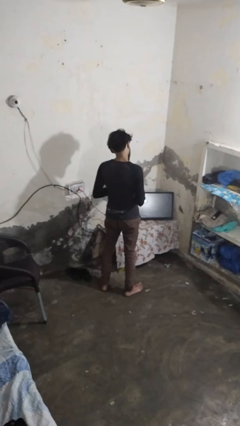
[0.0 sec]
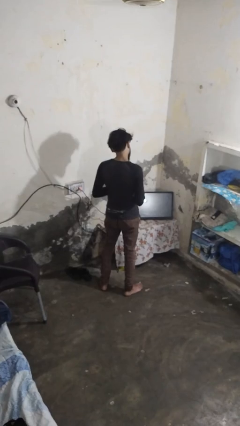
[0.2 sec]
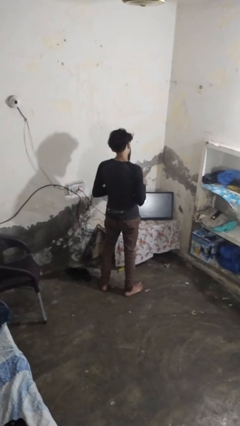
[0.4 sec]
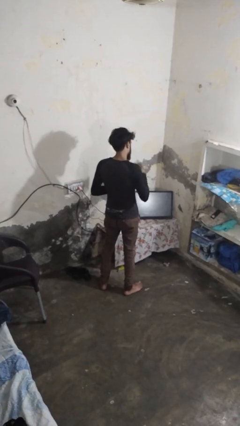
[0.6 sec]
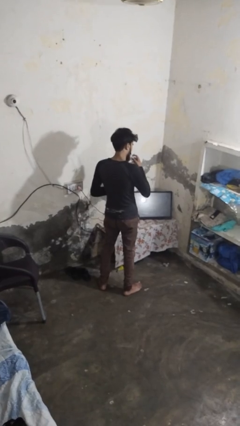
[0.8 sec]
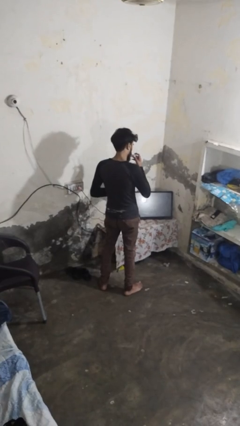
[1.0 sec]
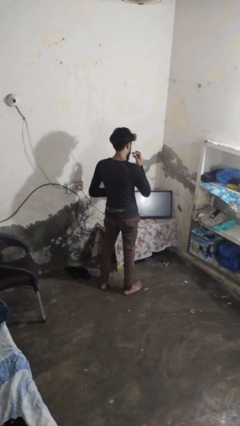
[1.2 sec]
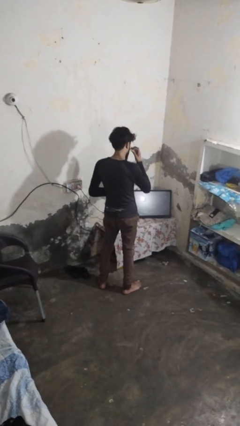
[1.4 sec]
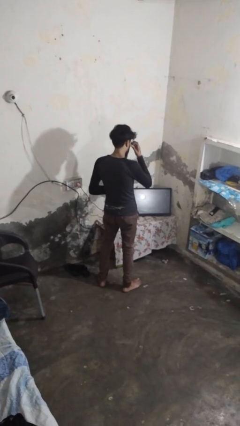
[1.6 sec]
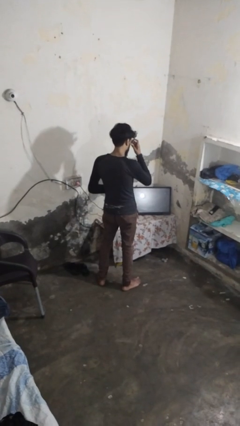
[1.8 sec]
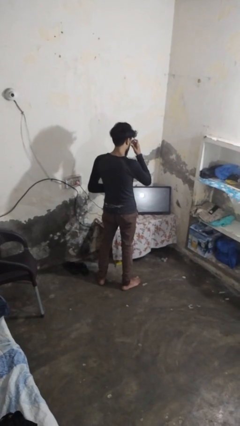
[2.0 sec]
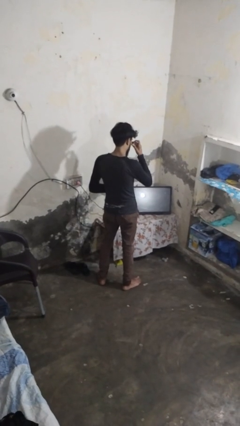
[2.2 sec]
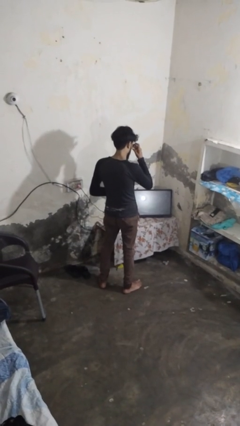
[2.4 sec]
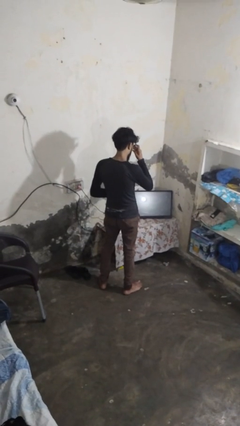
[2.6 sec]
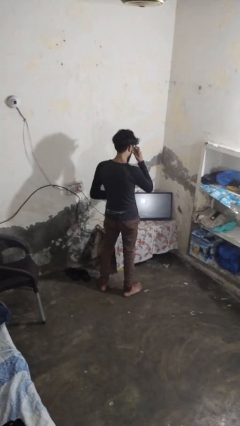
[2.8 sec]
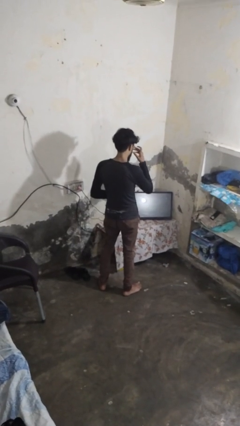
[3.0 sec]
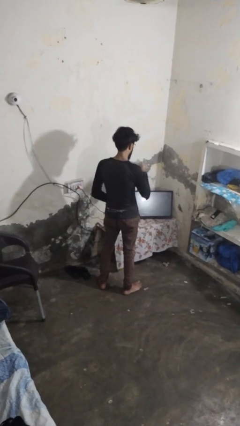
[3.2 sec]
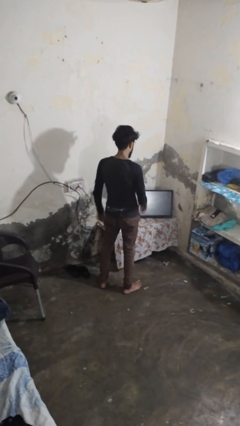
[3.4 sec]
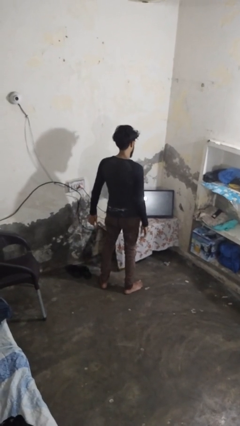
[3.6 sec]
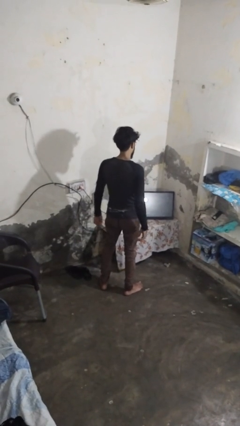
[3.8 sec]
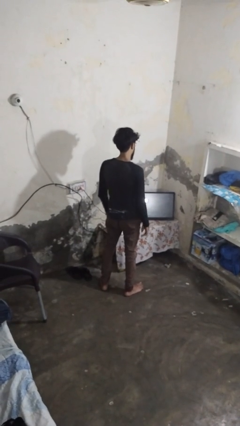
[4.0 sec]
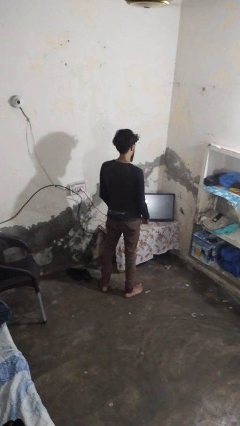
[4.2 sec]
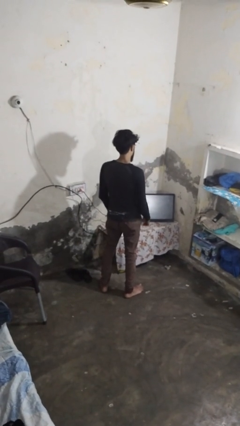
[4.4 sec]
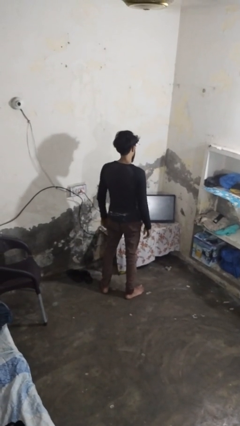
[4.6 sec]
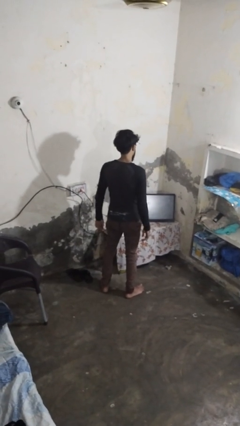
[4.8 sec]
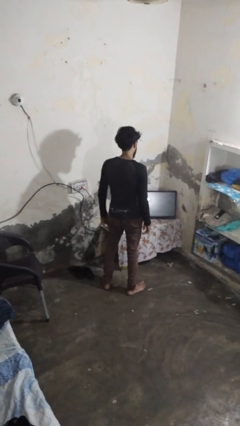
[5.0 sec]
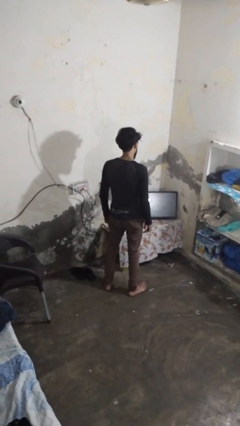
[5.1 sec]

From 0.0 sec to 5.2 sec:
person puts on glasses

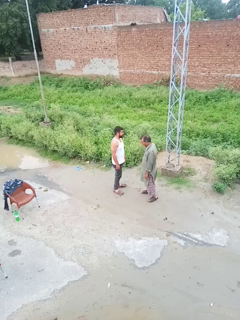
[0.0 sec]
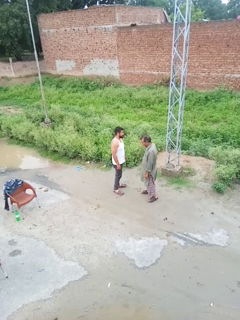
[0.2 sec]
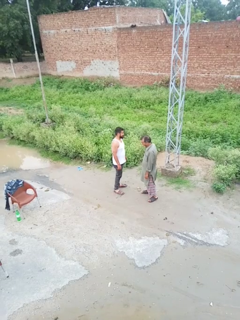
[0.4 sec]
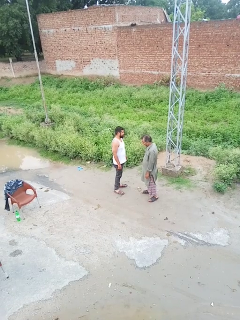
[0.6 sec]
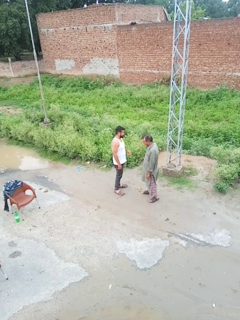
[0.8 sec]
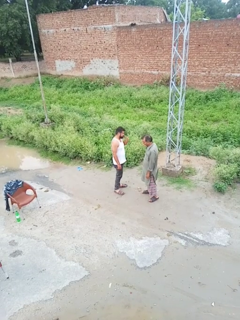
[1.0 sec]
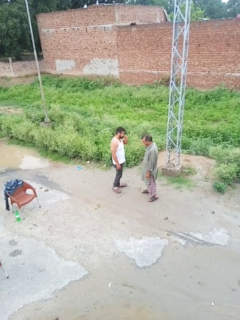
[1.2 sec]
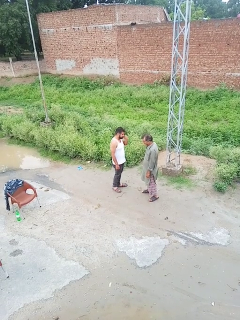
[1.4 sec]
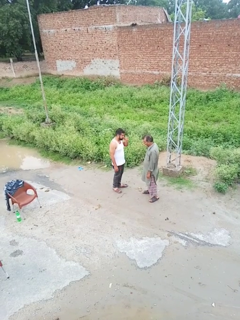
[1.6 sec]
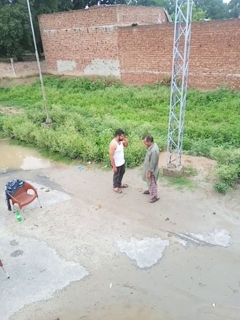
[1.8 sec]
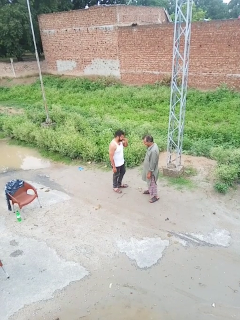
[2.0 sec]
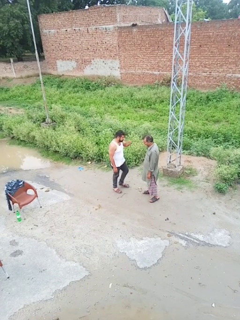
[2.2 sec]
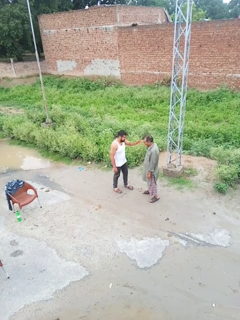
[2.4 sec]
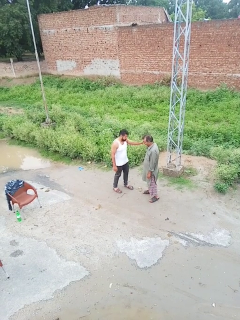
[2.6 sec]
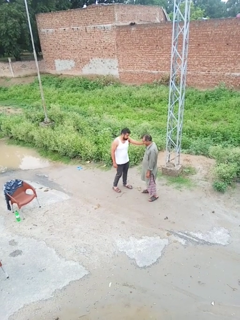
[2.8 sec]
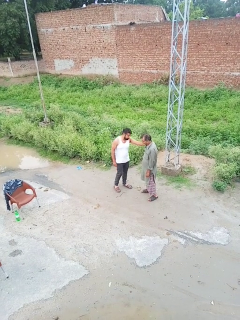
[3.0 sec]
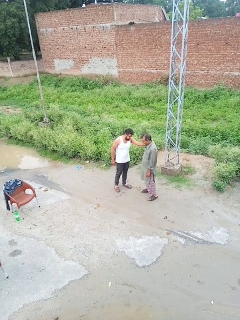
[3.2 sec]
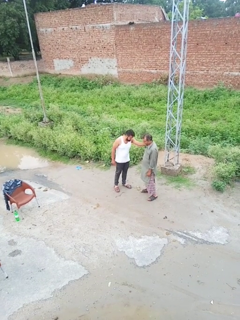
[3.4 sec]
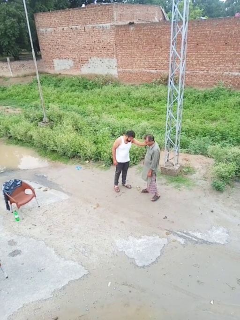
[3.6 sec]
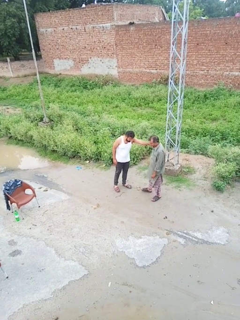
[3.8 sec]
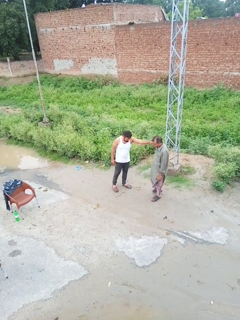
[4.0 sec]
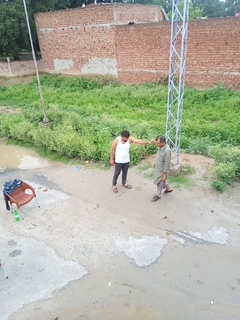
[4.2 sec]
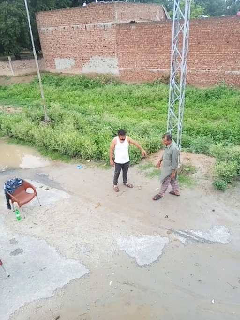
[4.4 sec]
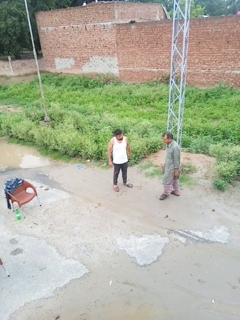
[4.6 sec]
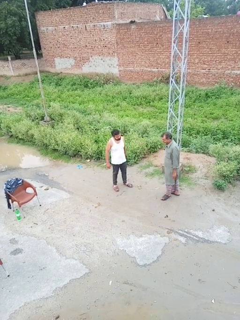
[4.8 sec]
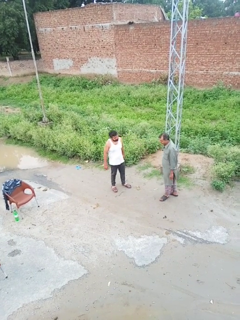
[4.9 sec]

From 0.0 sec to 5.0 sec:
person shoves person

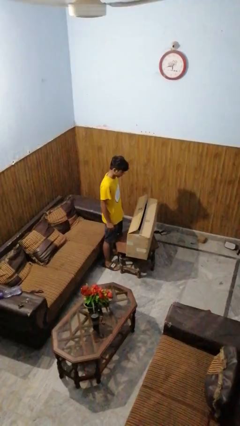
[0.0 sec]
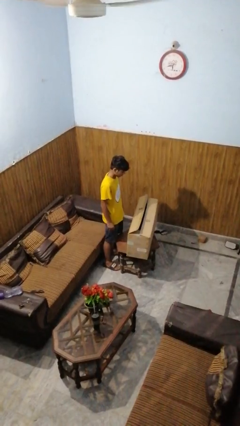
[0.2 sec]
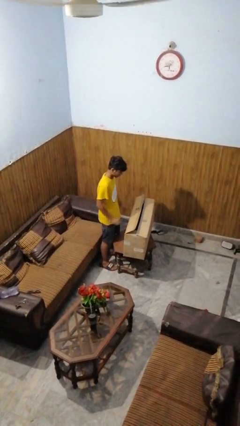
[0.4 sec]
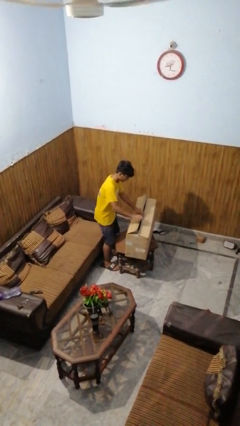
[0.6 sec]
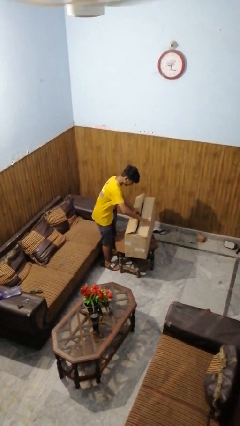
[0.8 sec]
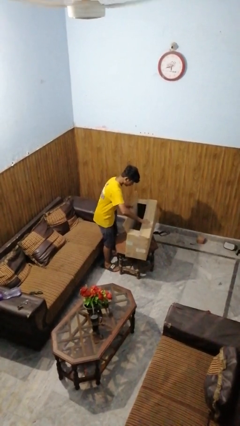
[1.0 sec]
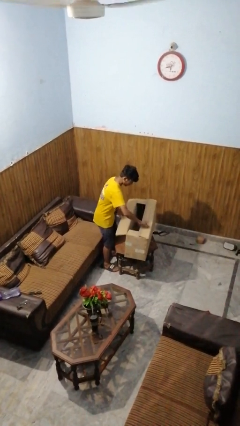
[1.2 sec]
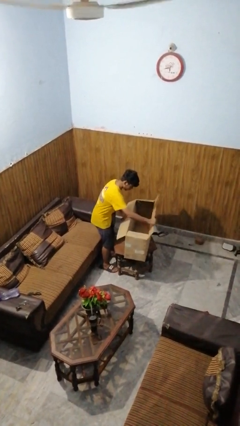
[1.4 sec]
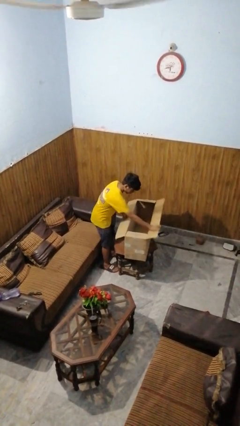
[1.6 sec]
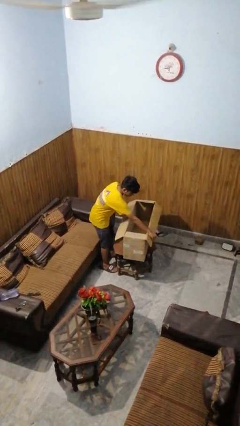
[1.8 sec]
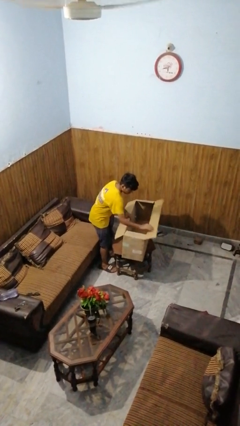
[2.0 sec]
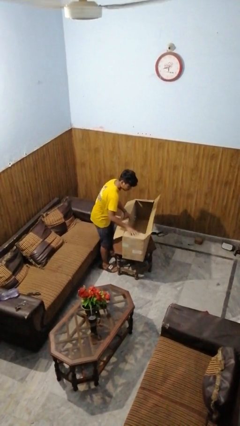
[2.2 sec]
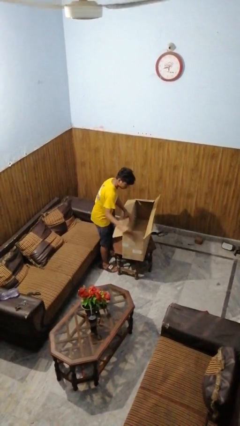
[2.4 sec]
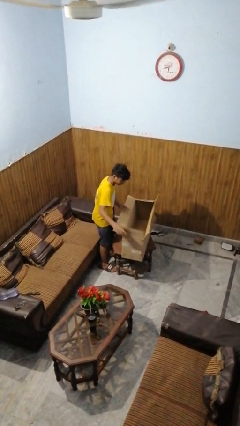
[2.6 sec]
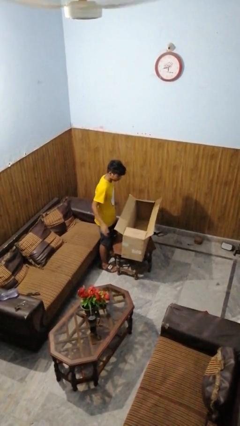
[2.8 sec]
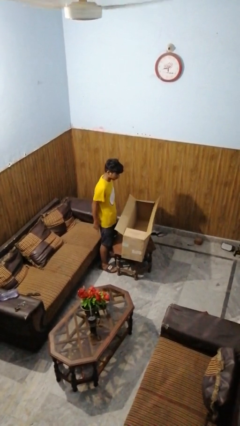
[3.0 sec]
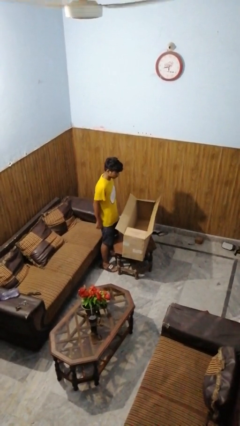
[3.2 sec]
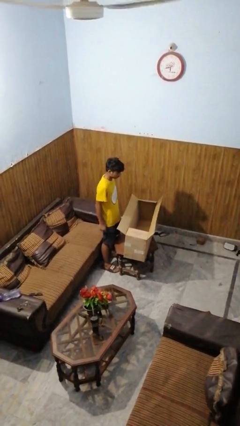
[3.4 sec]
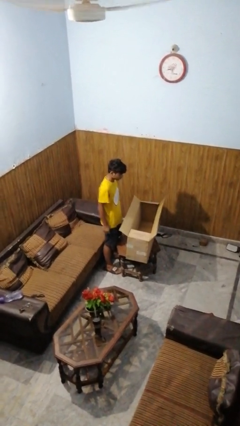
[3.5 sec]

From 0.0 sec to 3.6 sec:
person opens box

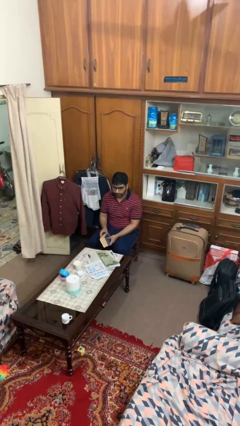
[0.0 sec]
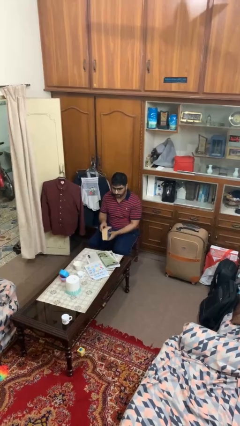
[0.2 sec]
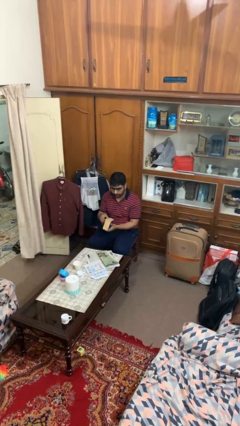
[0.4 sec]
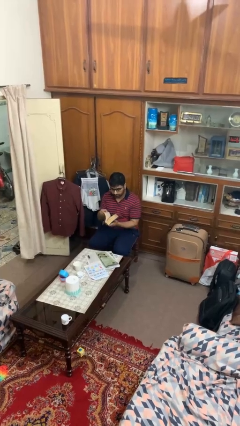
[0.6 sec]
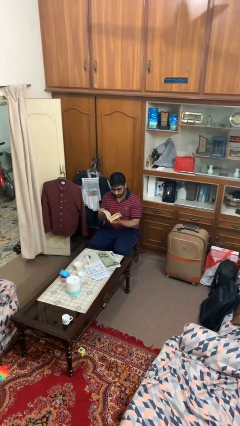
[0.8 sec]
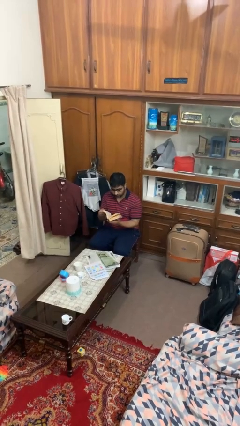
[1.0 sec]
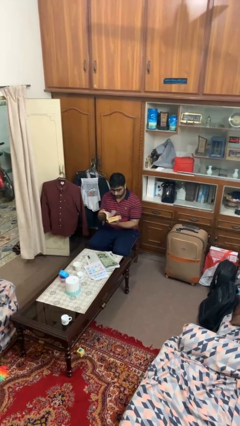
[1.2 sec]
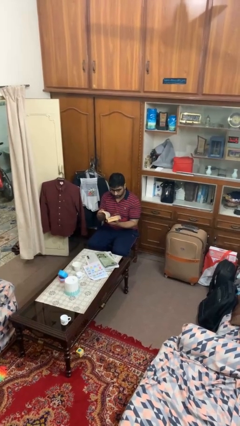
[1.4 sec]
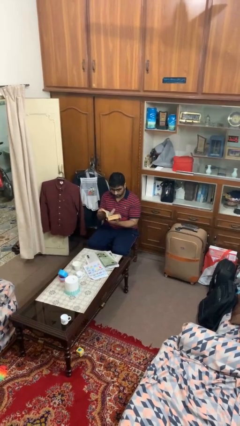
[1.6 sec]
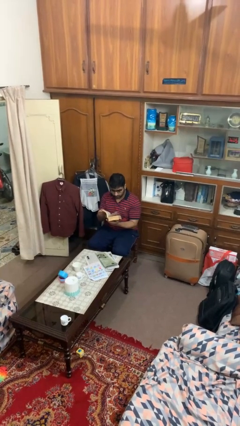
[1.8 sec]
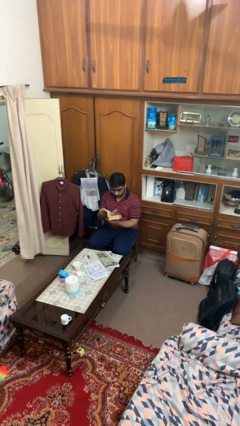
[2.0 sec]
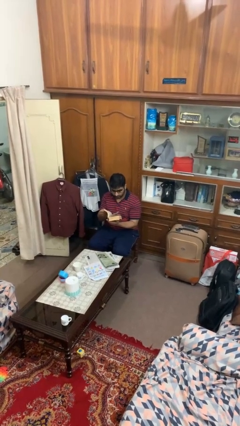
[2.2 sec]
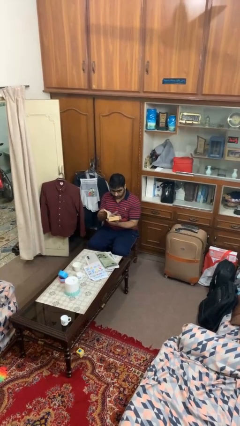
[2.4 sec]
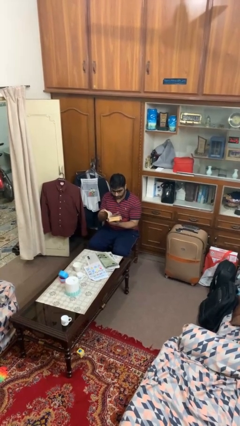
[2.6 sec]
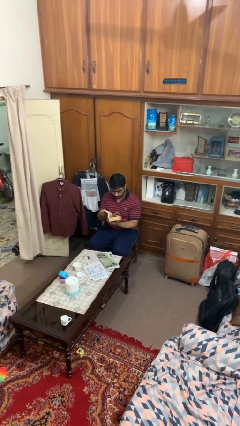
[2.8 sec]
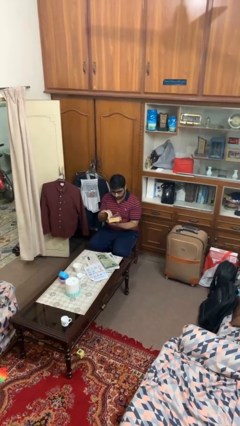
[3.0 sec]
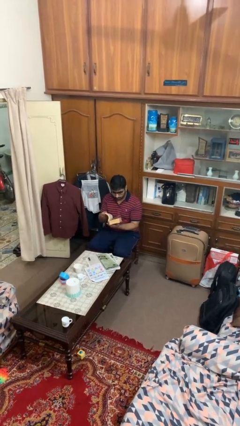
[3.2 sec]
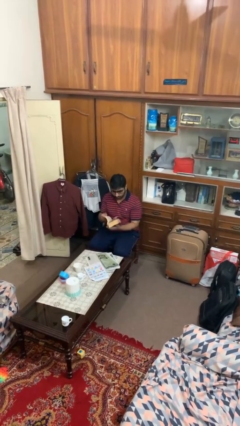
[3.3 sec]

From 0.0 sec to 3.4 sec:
person reads book

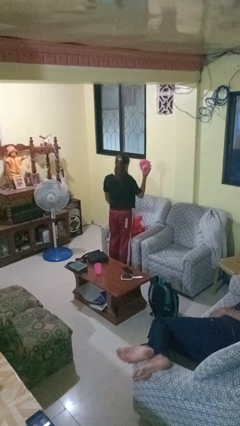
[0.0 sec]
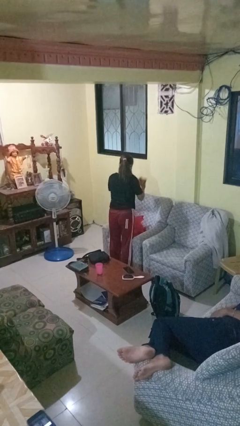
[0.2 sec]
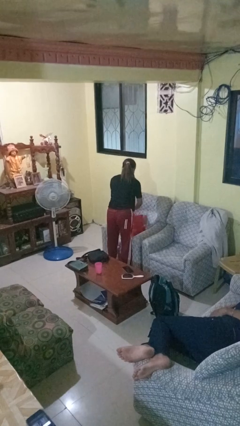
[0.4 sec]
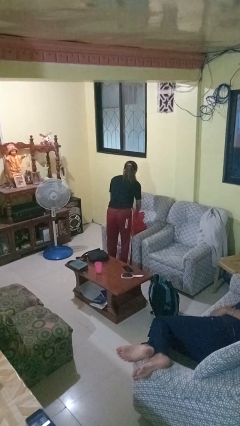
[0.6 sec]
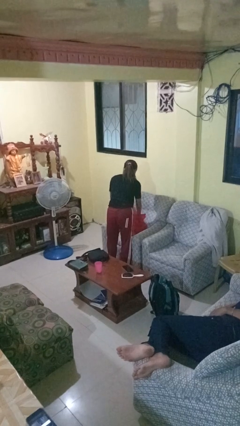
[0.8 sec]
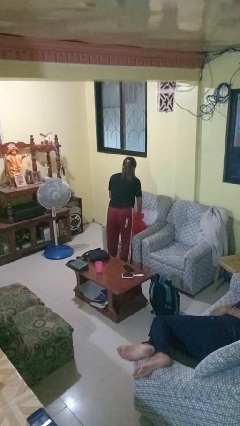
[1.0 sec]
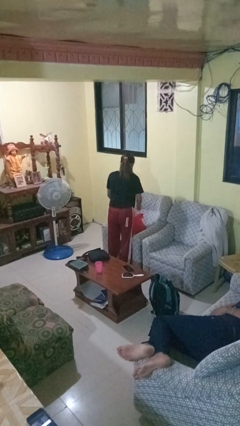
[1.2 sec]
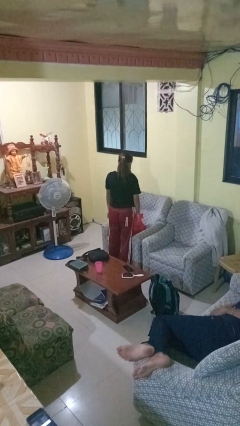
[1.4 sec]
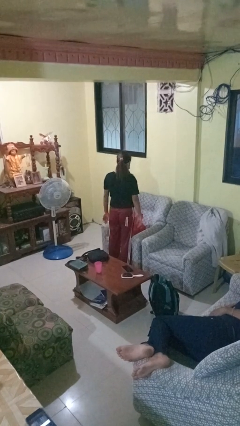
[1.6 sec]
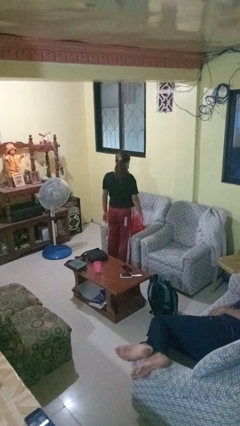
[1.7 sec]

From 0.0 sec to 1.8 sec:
person puts object into bag
